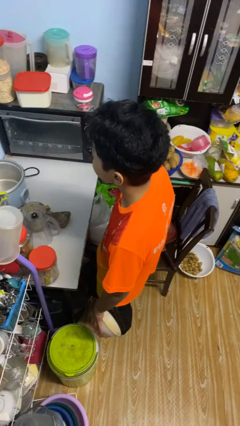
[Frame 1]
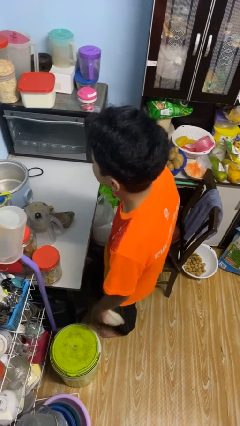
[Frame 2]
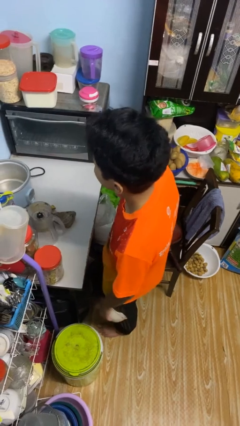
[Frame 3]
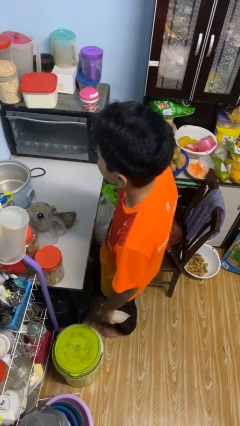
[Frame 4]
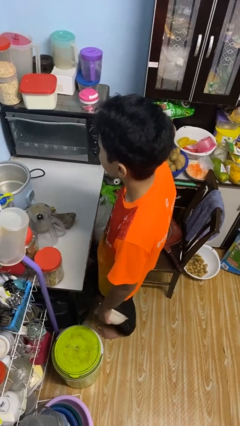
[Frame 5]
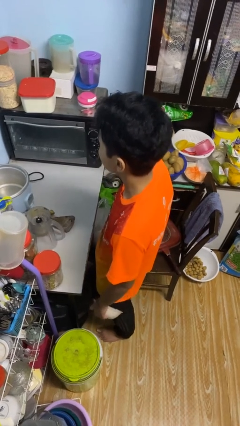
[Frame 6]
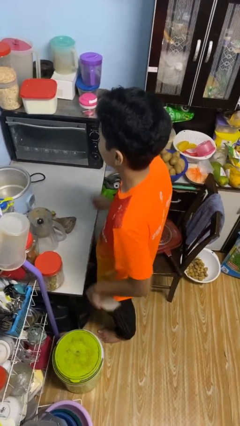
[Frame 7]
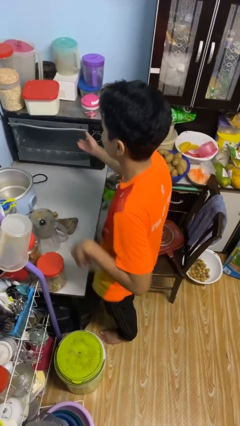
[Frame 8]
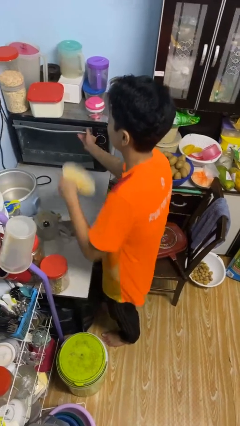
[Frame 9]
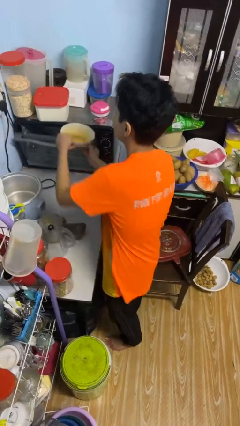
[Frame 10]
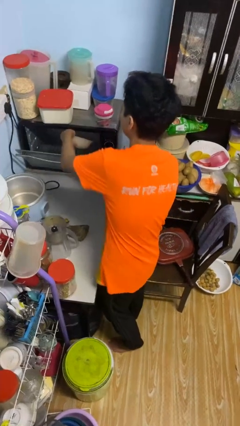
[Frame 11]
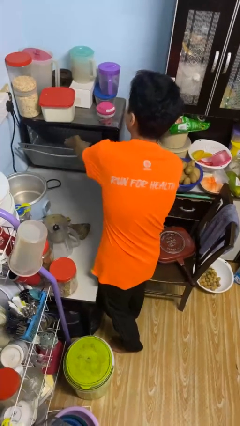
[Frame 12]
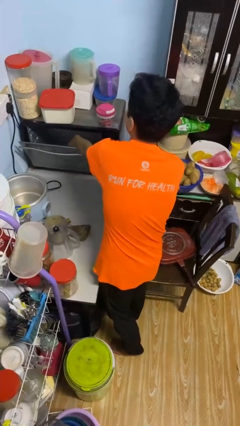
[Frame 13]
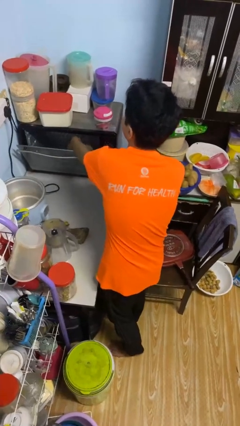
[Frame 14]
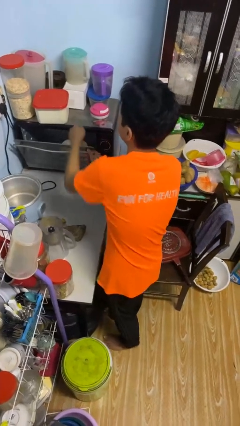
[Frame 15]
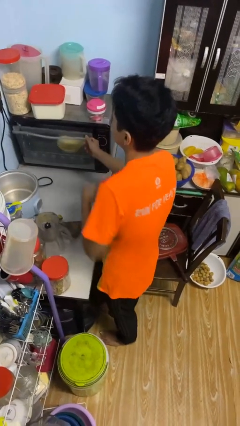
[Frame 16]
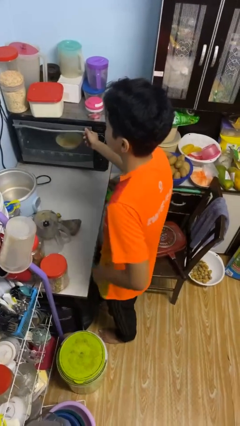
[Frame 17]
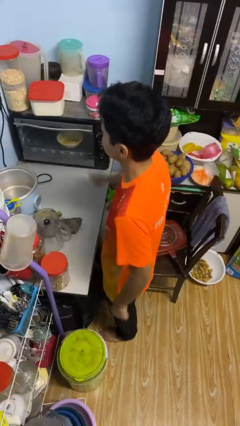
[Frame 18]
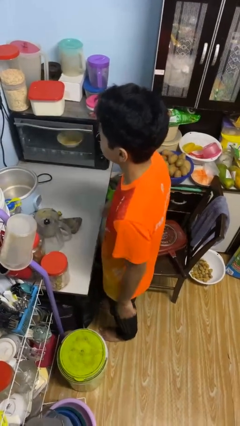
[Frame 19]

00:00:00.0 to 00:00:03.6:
person puts object into oven

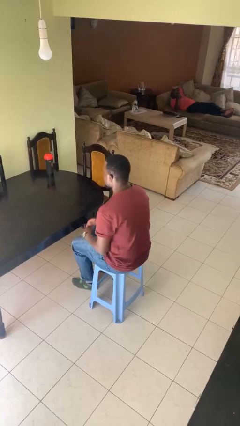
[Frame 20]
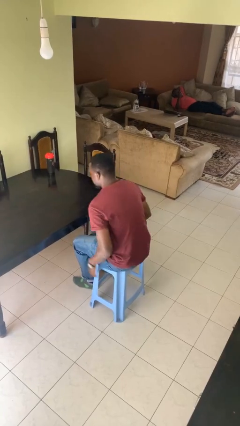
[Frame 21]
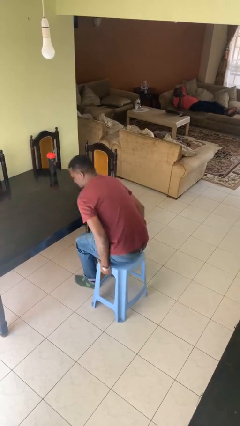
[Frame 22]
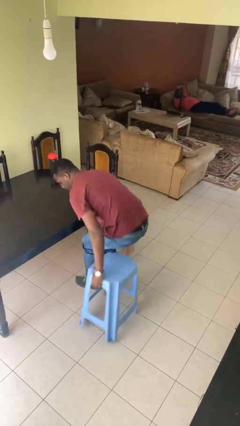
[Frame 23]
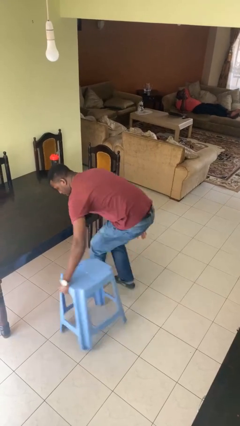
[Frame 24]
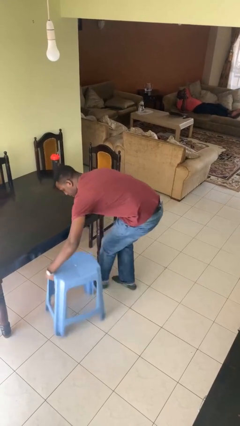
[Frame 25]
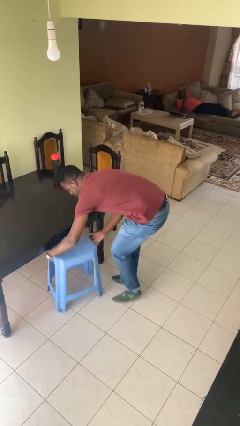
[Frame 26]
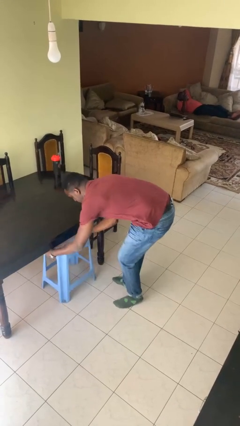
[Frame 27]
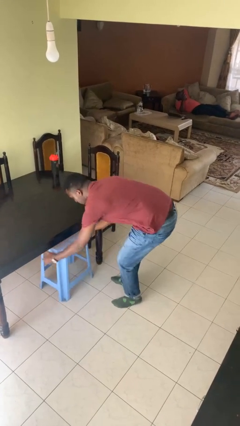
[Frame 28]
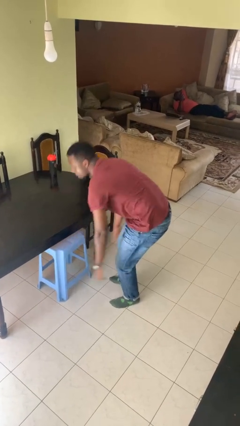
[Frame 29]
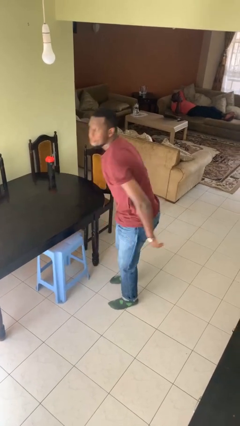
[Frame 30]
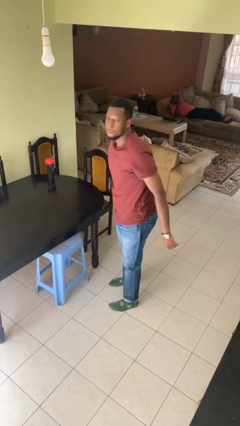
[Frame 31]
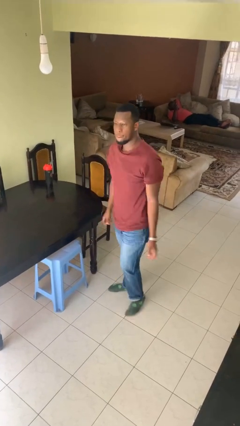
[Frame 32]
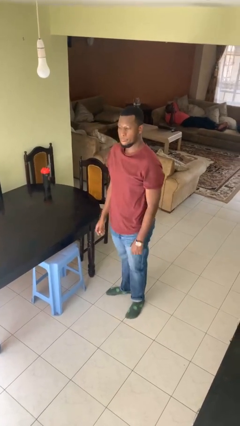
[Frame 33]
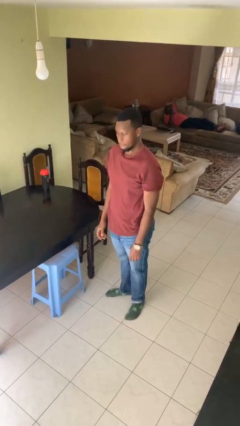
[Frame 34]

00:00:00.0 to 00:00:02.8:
person stands up

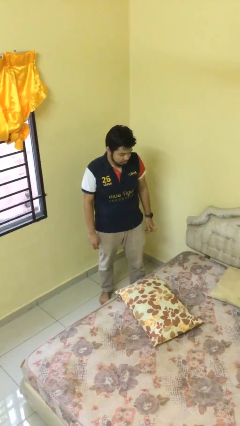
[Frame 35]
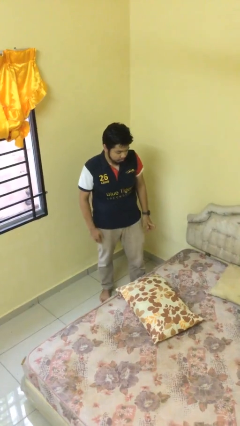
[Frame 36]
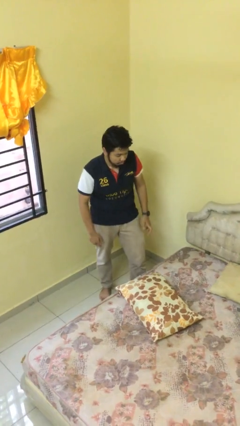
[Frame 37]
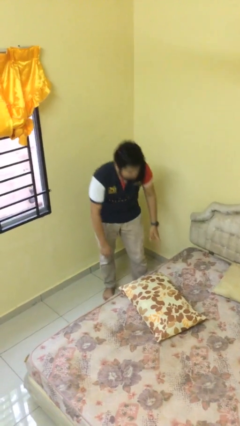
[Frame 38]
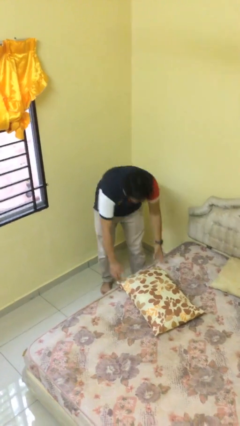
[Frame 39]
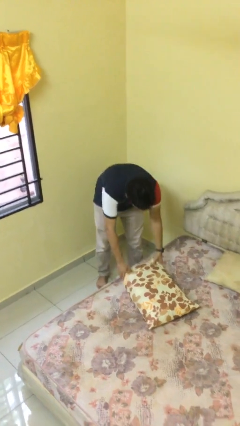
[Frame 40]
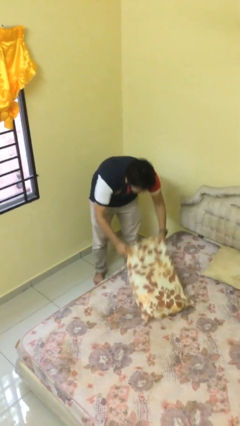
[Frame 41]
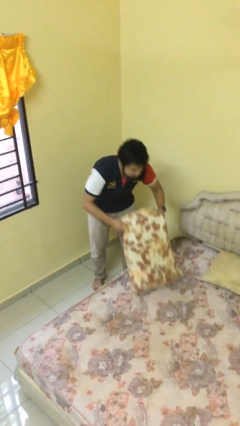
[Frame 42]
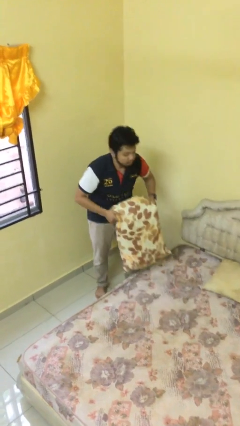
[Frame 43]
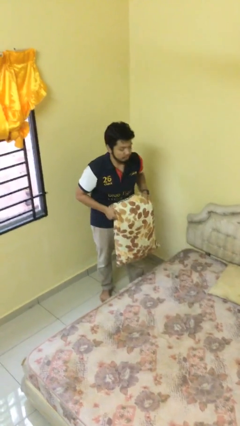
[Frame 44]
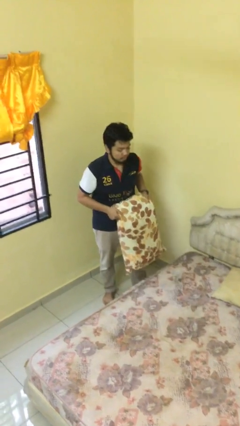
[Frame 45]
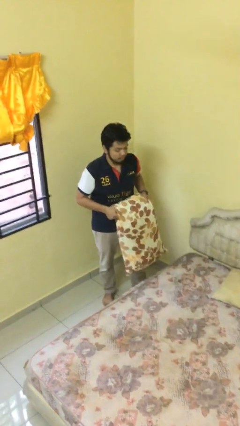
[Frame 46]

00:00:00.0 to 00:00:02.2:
person picks up object from bed

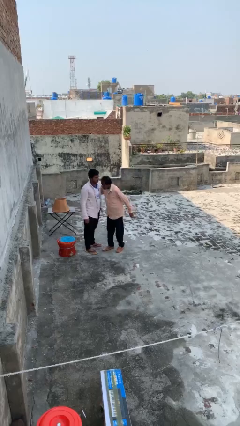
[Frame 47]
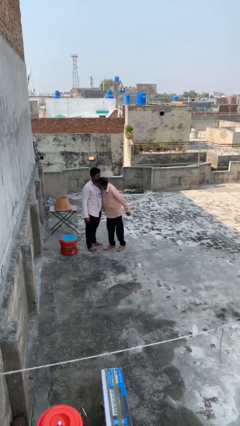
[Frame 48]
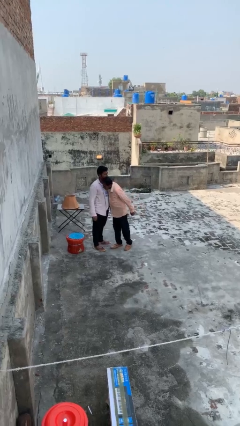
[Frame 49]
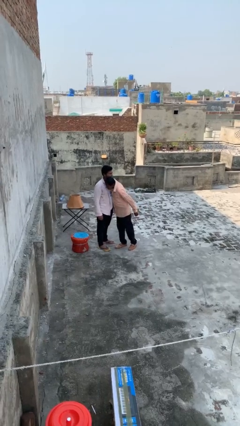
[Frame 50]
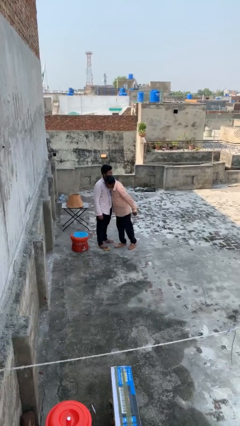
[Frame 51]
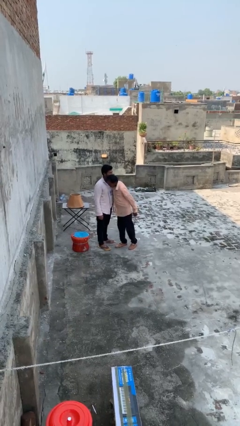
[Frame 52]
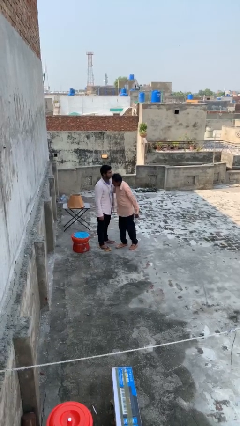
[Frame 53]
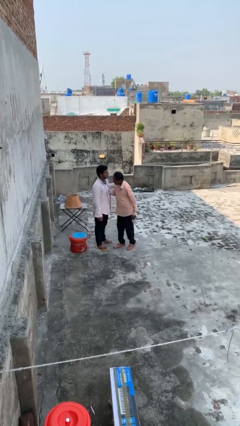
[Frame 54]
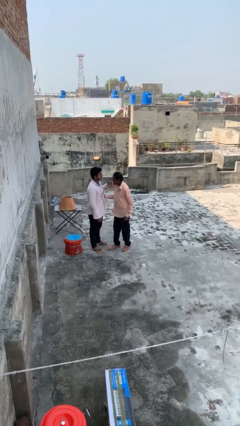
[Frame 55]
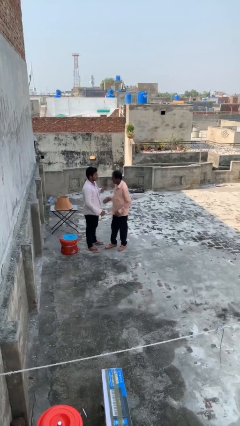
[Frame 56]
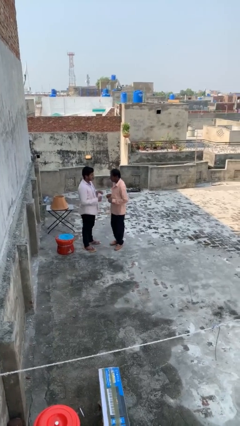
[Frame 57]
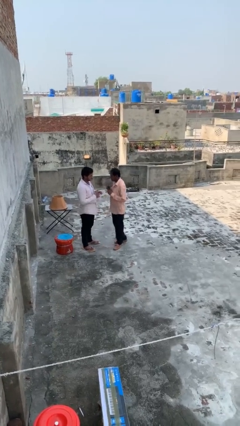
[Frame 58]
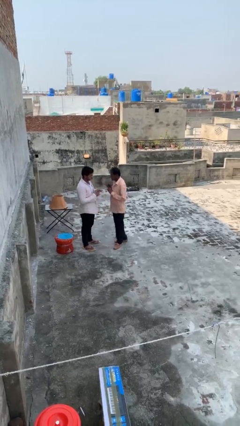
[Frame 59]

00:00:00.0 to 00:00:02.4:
person embraces person

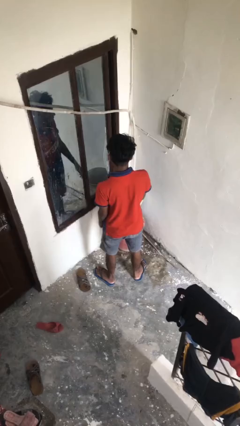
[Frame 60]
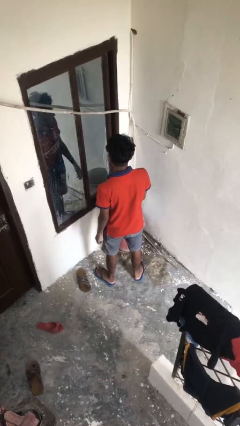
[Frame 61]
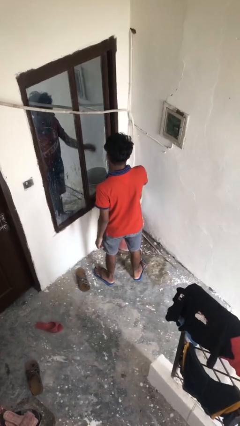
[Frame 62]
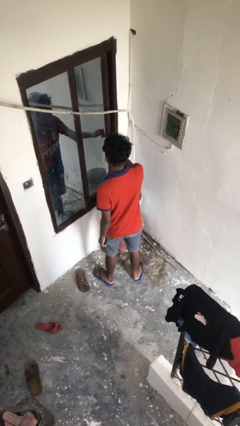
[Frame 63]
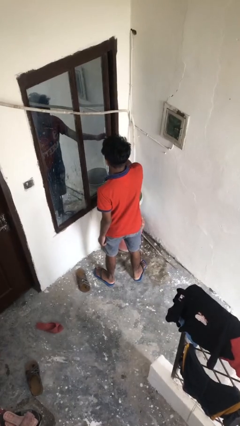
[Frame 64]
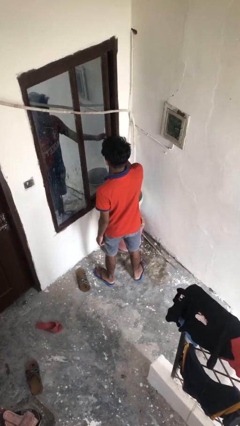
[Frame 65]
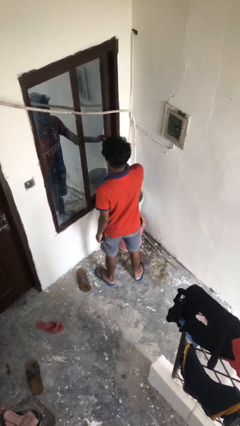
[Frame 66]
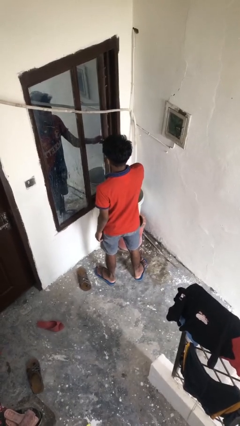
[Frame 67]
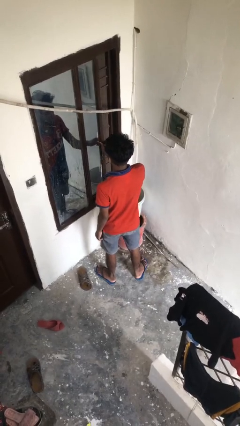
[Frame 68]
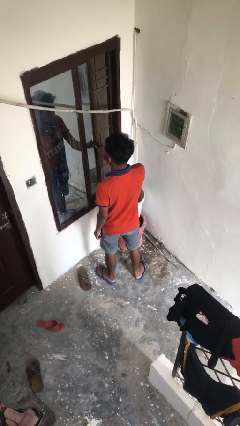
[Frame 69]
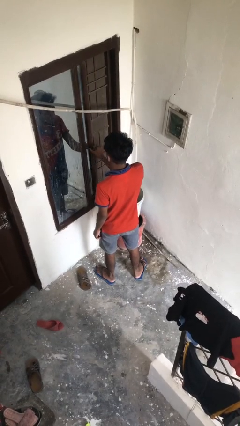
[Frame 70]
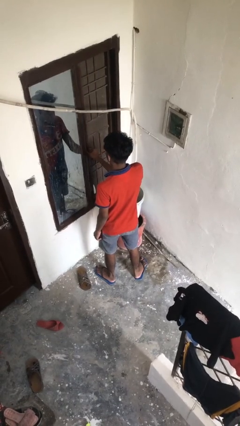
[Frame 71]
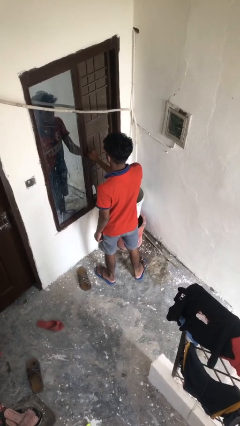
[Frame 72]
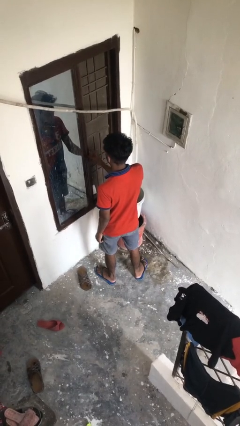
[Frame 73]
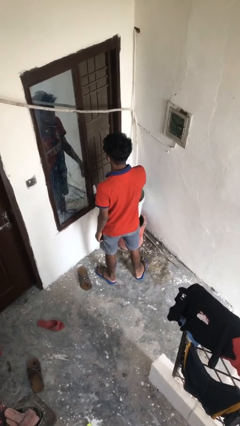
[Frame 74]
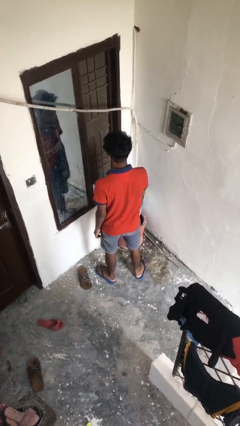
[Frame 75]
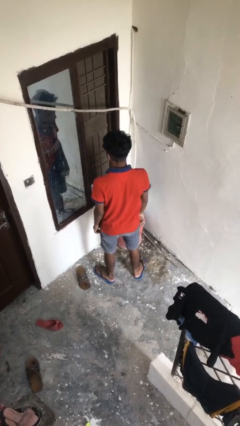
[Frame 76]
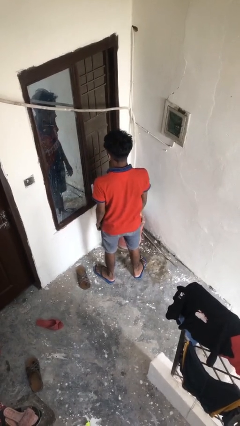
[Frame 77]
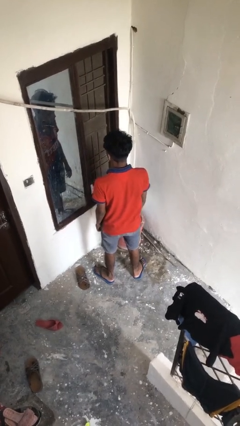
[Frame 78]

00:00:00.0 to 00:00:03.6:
person opens home window

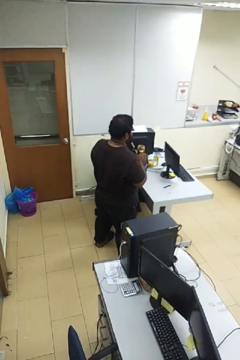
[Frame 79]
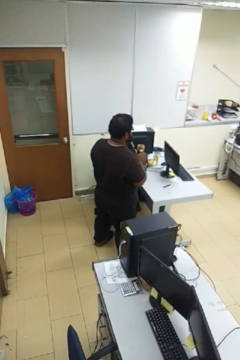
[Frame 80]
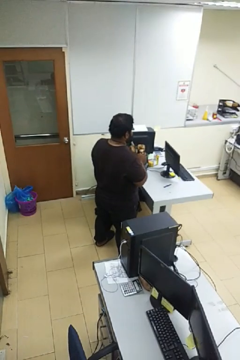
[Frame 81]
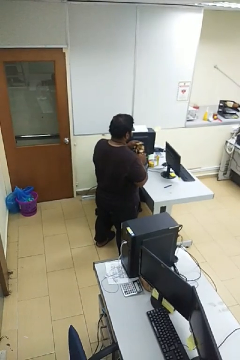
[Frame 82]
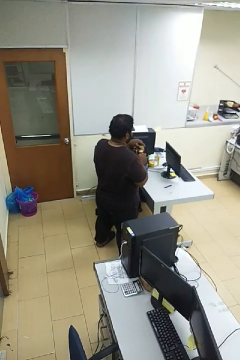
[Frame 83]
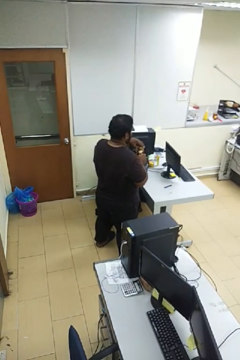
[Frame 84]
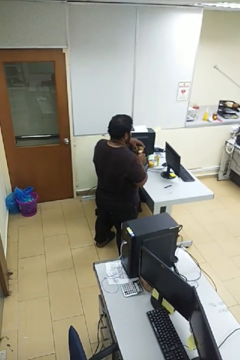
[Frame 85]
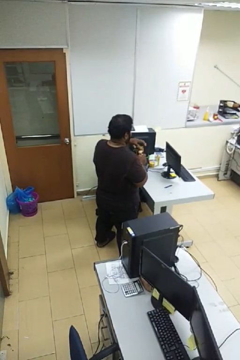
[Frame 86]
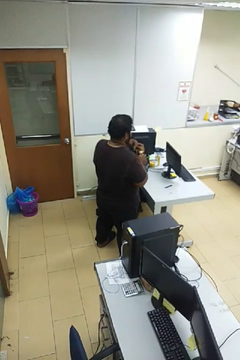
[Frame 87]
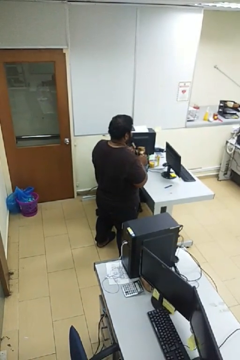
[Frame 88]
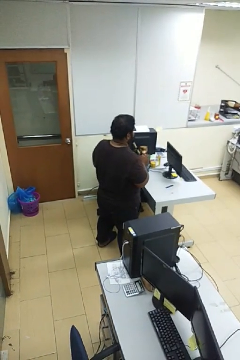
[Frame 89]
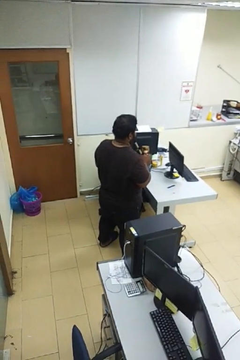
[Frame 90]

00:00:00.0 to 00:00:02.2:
person closes jar

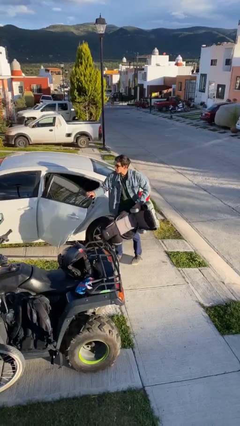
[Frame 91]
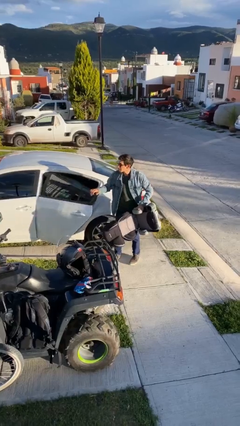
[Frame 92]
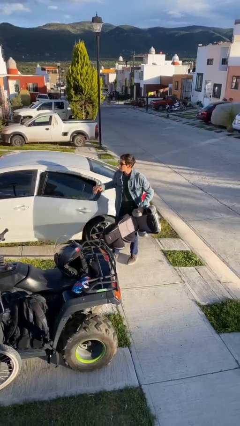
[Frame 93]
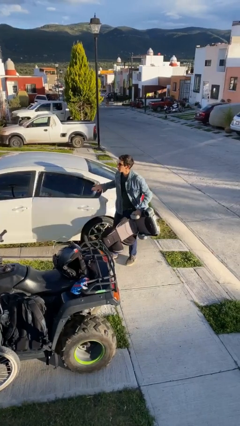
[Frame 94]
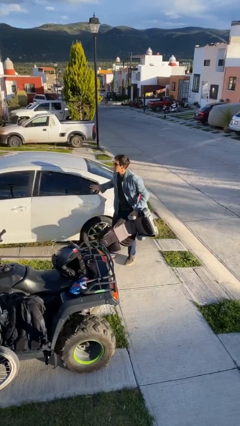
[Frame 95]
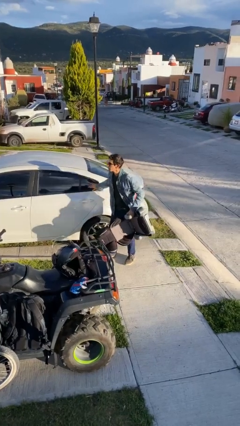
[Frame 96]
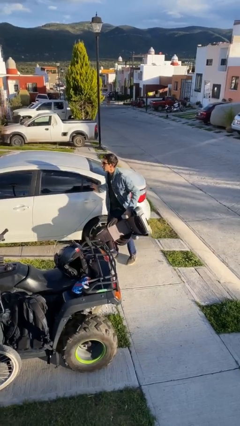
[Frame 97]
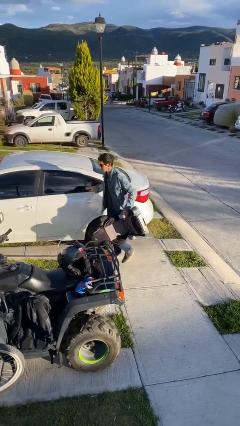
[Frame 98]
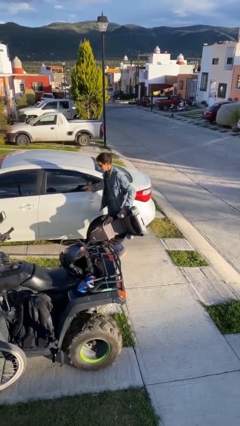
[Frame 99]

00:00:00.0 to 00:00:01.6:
person closes car door
